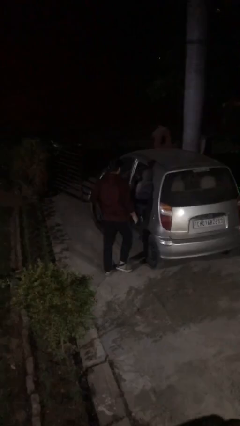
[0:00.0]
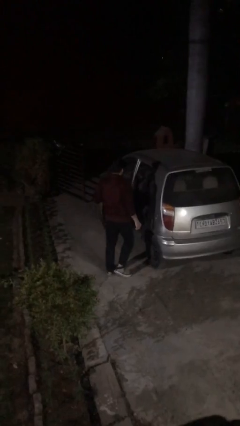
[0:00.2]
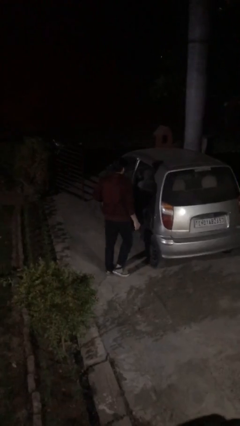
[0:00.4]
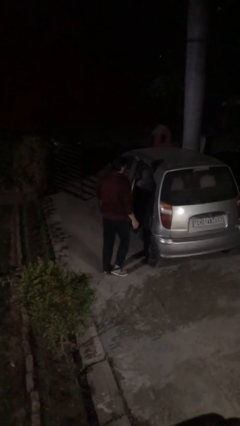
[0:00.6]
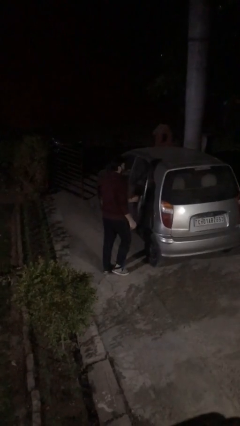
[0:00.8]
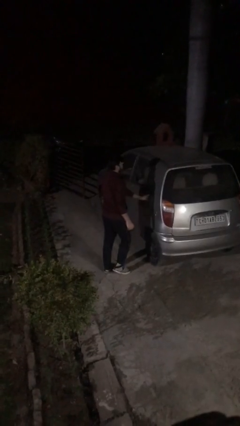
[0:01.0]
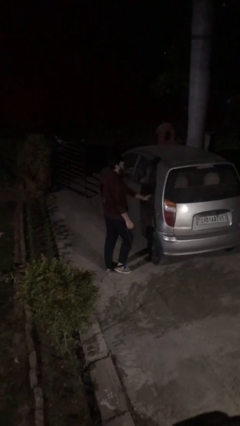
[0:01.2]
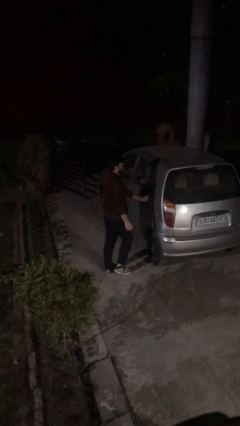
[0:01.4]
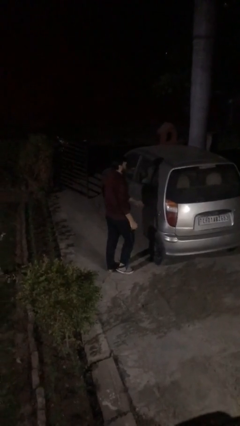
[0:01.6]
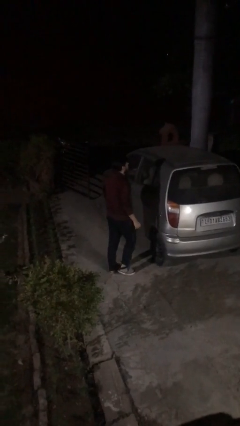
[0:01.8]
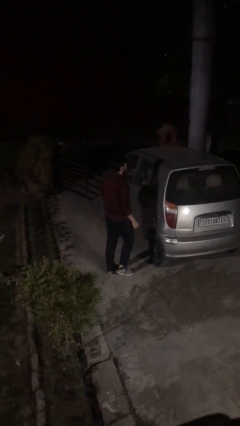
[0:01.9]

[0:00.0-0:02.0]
person closes car door

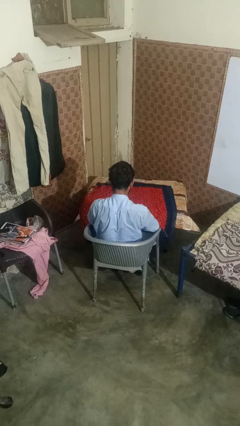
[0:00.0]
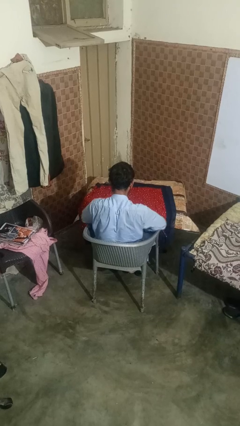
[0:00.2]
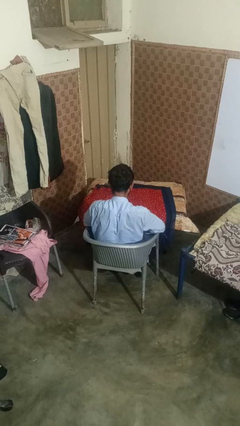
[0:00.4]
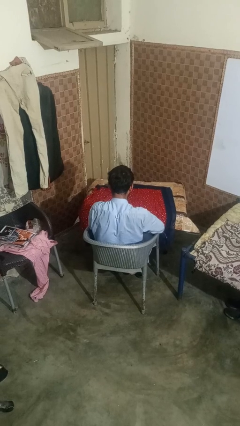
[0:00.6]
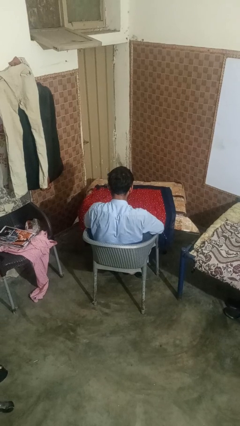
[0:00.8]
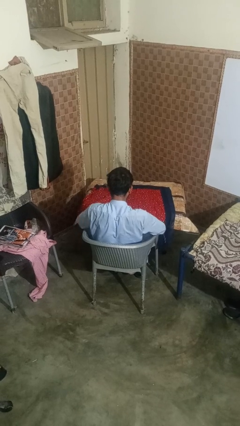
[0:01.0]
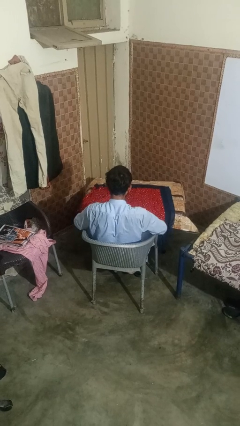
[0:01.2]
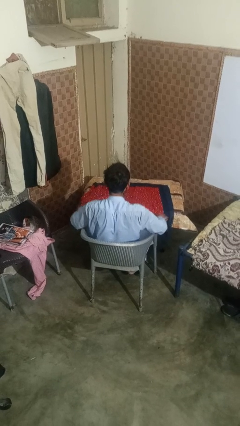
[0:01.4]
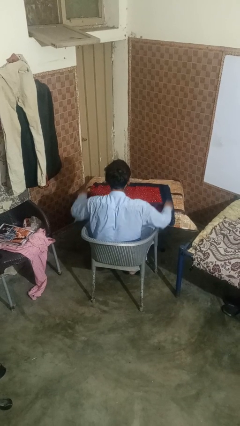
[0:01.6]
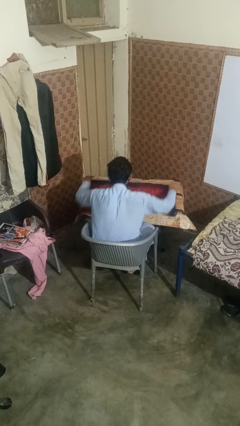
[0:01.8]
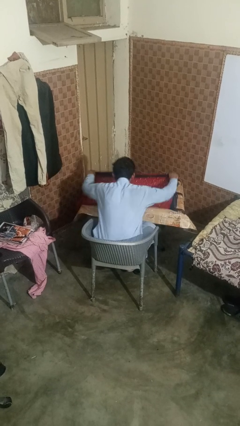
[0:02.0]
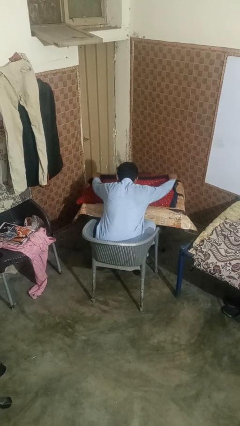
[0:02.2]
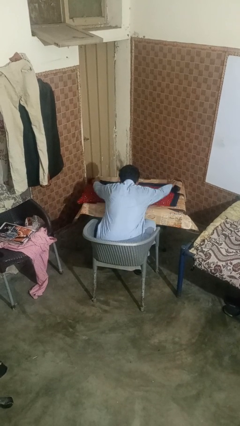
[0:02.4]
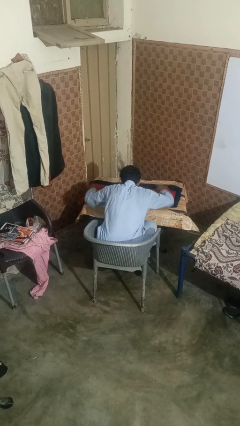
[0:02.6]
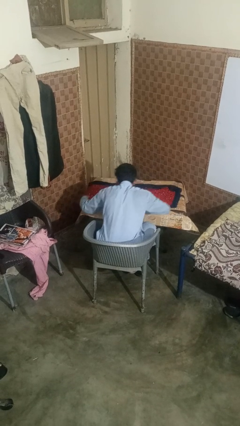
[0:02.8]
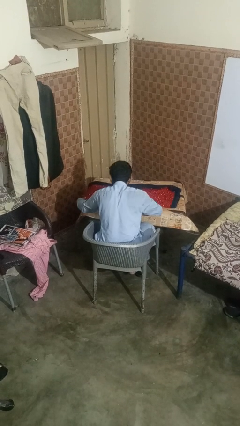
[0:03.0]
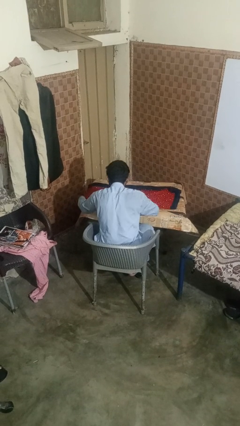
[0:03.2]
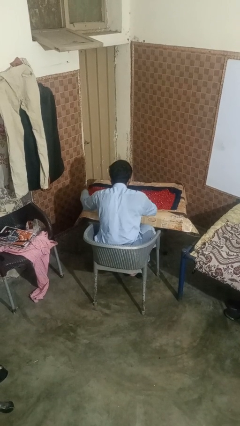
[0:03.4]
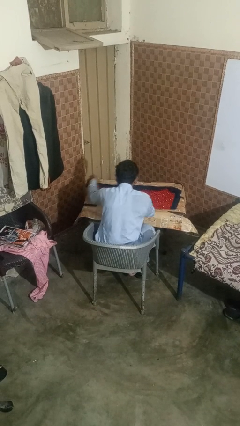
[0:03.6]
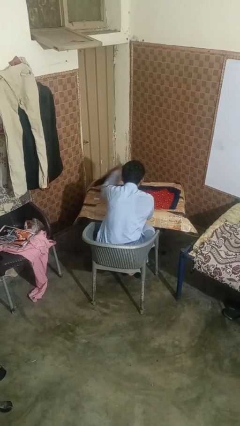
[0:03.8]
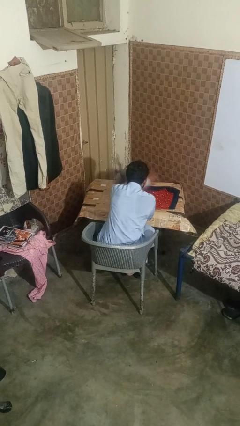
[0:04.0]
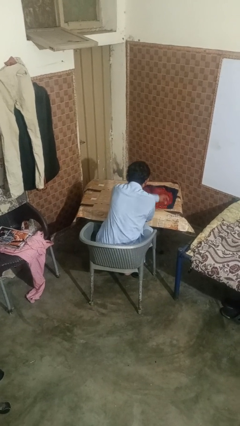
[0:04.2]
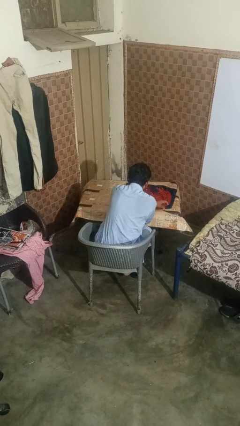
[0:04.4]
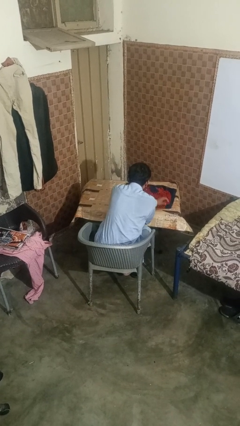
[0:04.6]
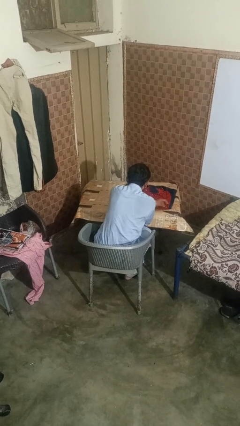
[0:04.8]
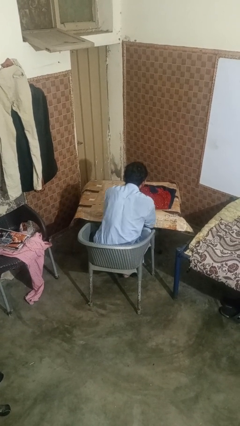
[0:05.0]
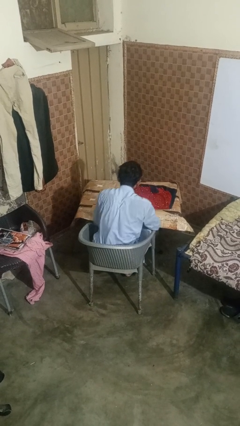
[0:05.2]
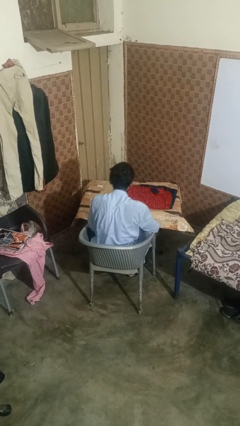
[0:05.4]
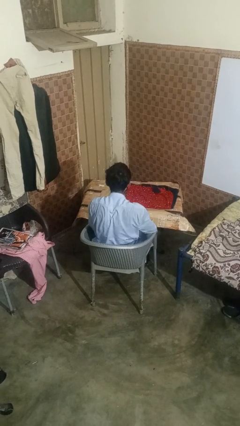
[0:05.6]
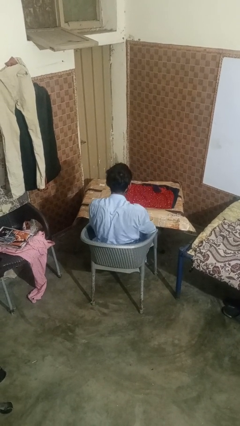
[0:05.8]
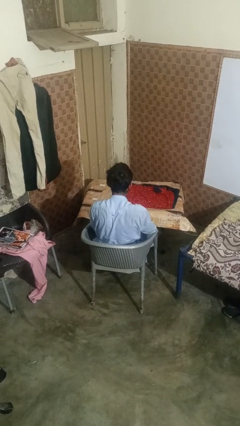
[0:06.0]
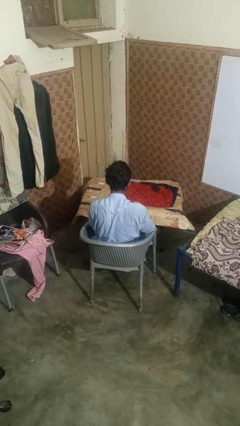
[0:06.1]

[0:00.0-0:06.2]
person folds tablecloth

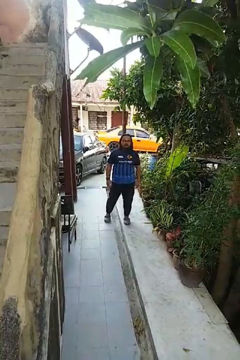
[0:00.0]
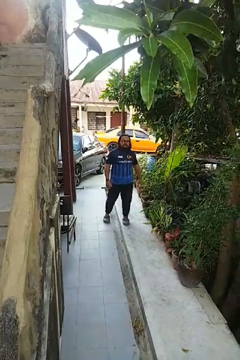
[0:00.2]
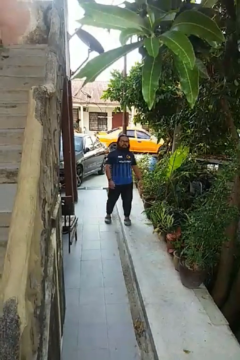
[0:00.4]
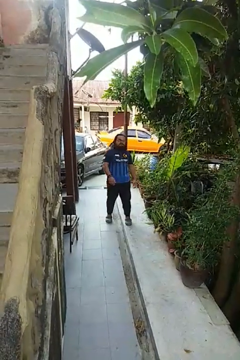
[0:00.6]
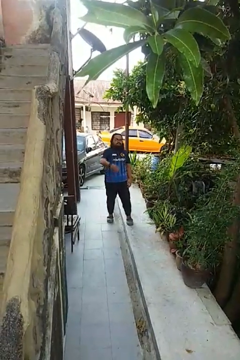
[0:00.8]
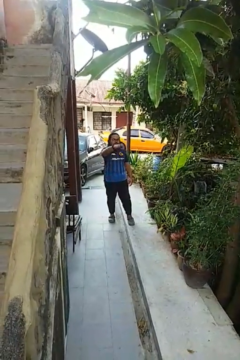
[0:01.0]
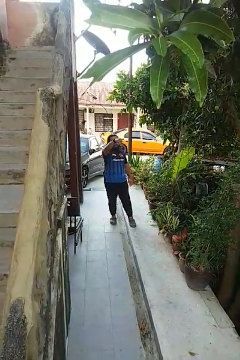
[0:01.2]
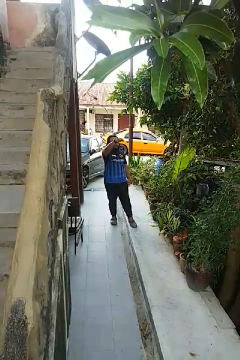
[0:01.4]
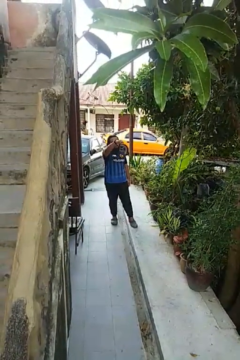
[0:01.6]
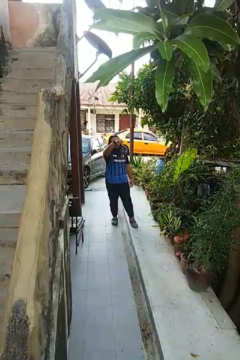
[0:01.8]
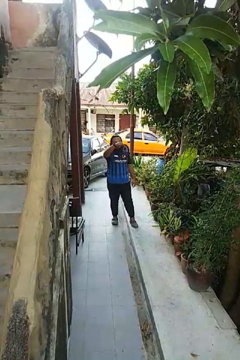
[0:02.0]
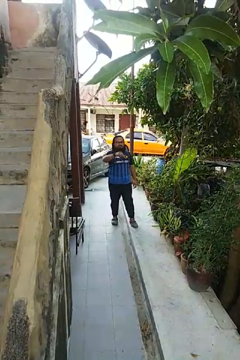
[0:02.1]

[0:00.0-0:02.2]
person gestures come here

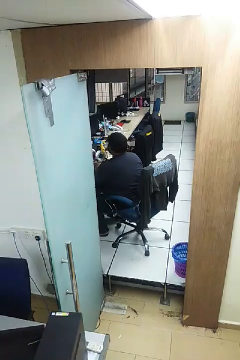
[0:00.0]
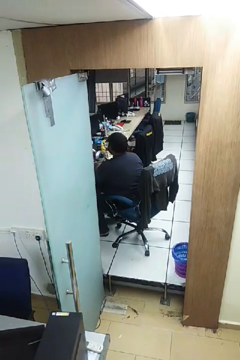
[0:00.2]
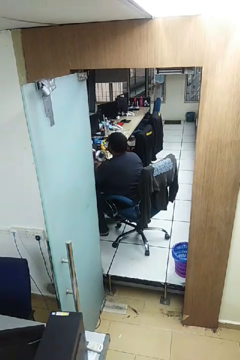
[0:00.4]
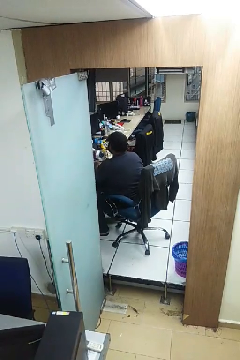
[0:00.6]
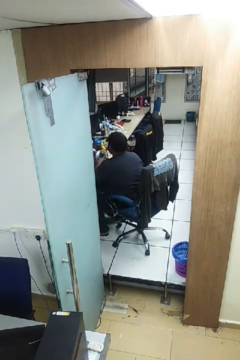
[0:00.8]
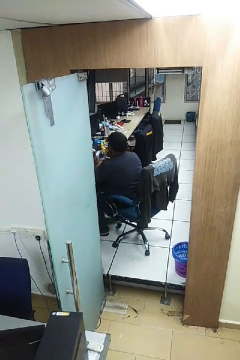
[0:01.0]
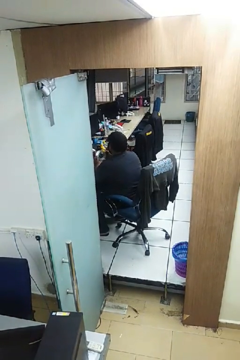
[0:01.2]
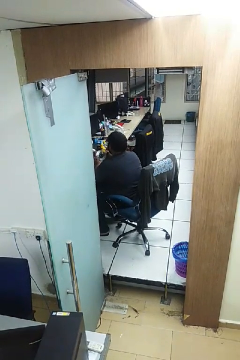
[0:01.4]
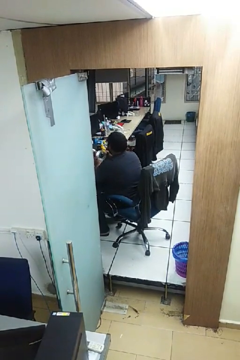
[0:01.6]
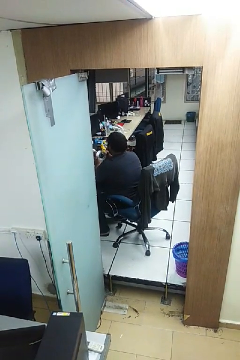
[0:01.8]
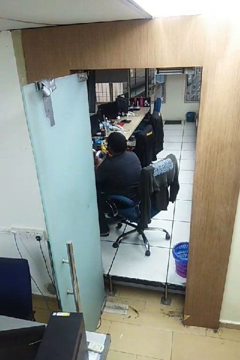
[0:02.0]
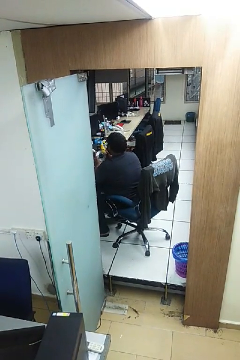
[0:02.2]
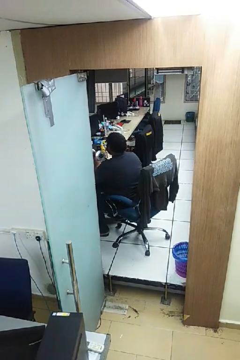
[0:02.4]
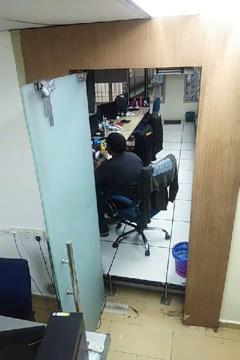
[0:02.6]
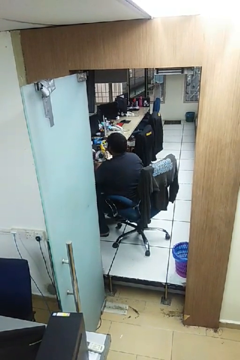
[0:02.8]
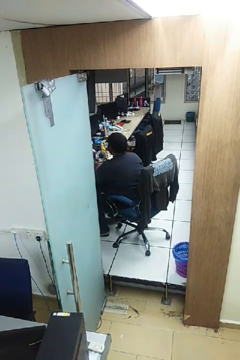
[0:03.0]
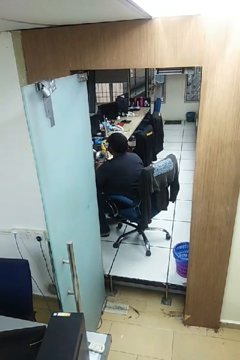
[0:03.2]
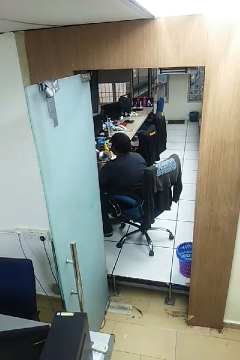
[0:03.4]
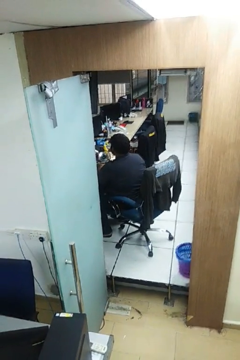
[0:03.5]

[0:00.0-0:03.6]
person turns off fan

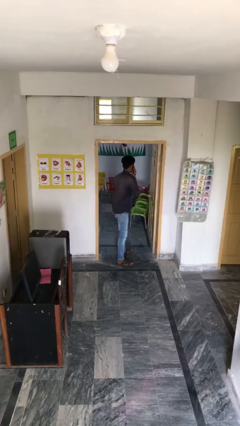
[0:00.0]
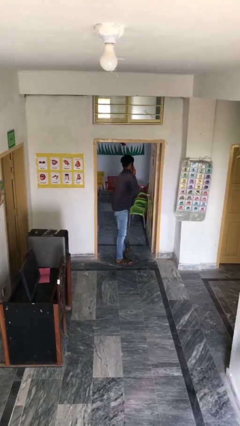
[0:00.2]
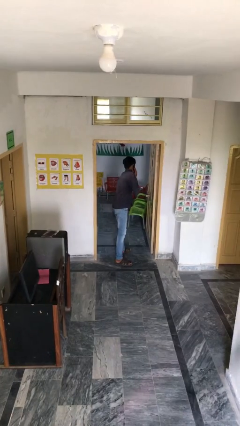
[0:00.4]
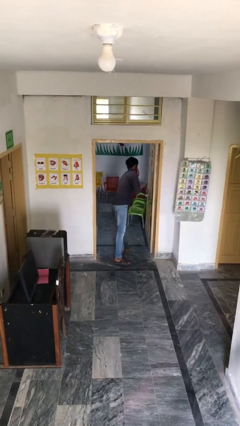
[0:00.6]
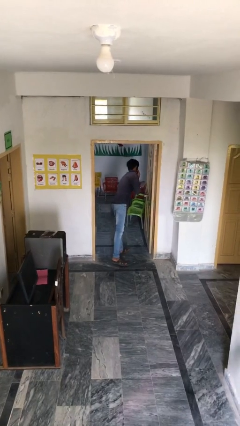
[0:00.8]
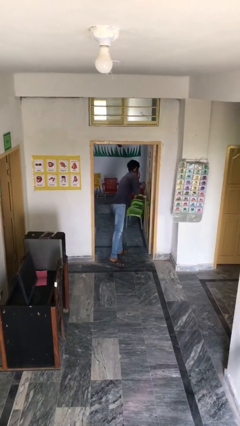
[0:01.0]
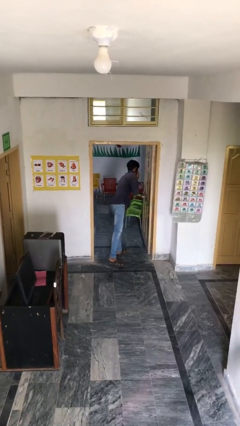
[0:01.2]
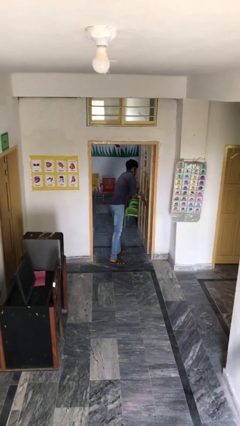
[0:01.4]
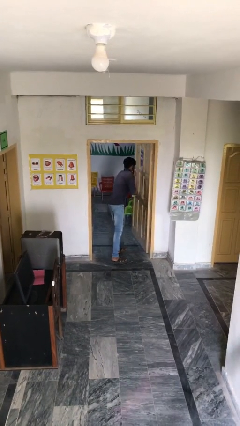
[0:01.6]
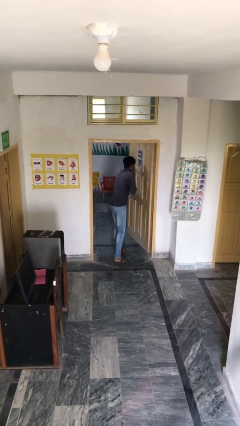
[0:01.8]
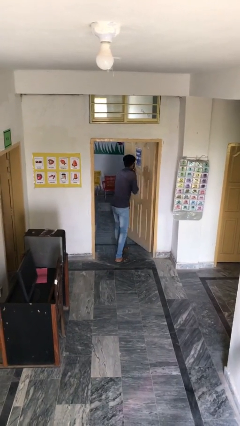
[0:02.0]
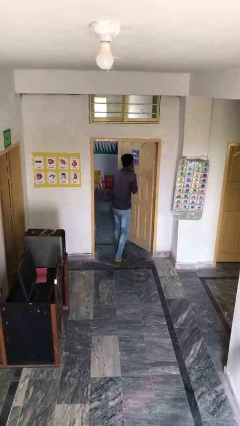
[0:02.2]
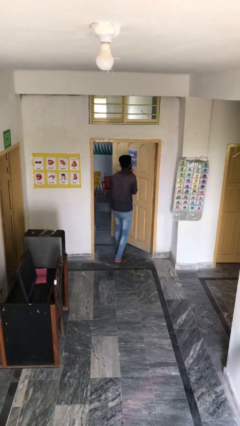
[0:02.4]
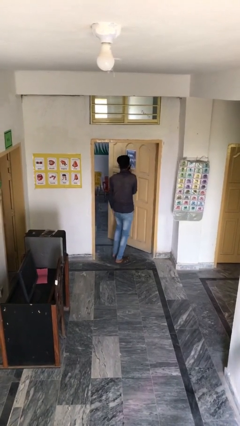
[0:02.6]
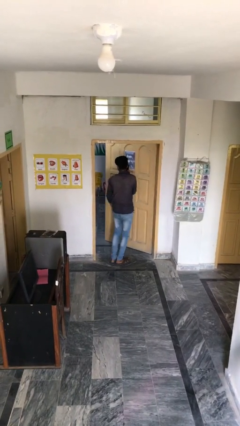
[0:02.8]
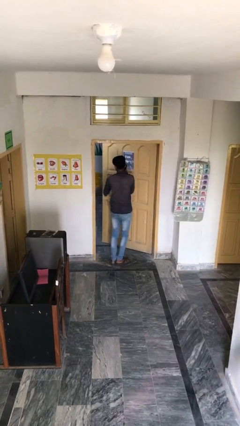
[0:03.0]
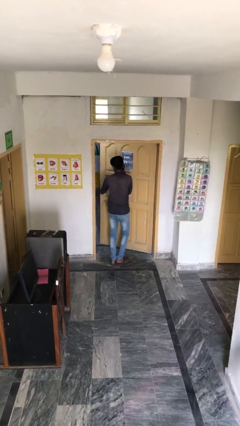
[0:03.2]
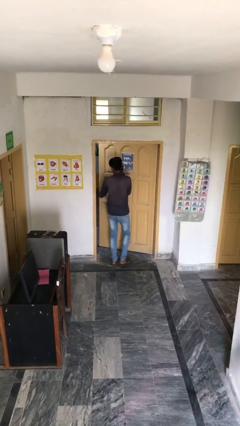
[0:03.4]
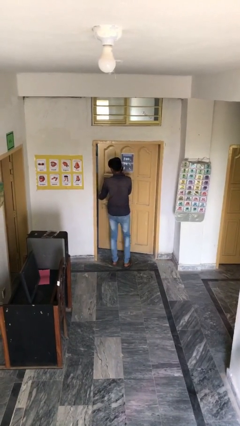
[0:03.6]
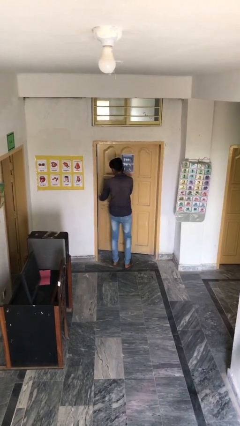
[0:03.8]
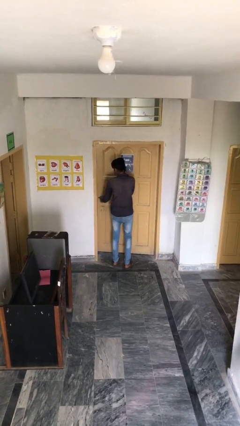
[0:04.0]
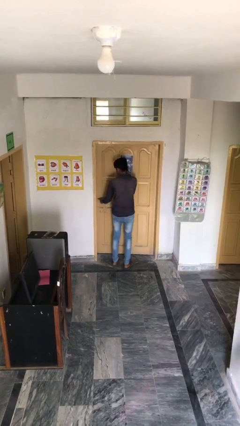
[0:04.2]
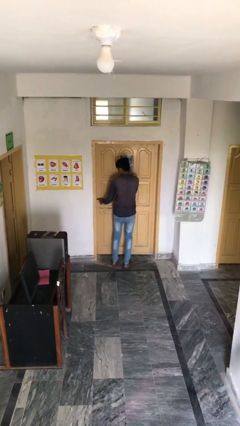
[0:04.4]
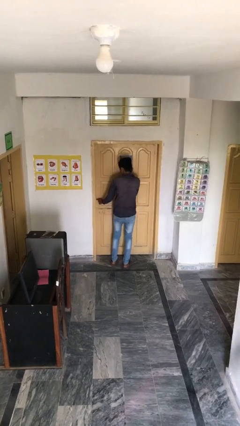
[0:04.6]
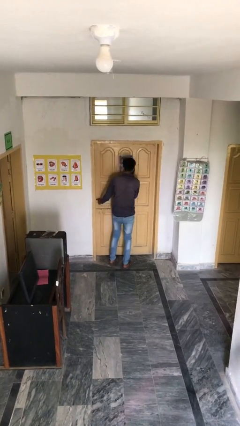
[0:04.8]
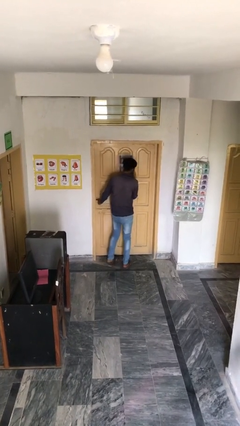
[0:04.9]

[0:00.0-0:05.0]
person closes facility door
